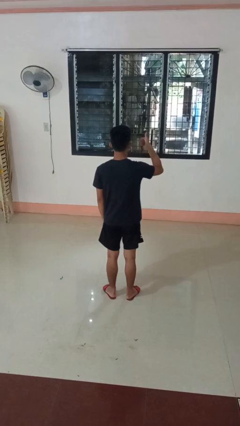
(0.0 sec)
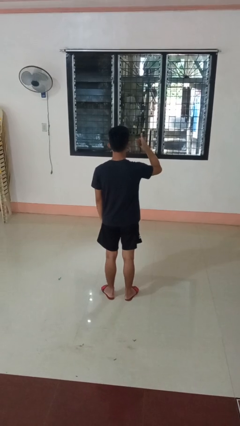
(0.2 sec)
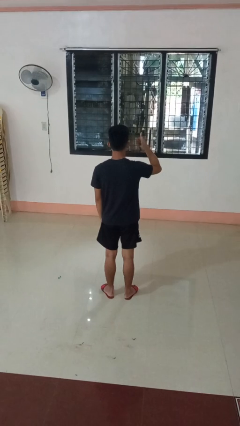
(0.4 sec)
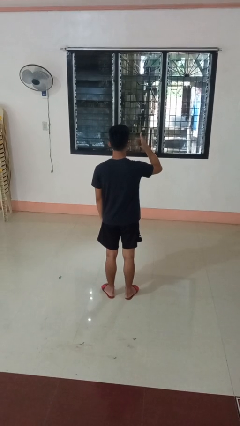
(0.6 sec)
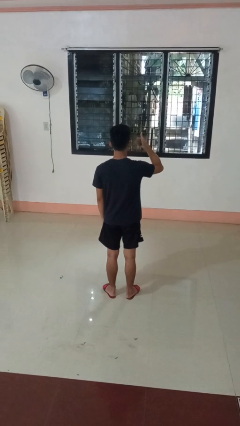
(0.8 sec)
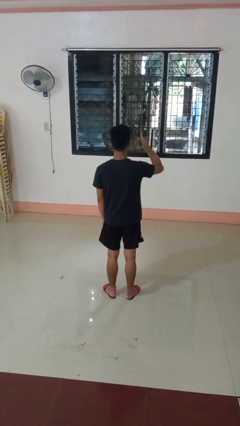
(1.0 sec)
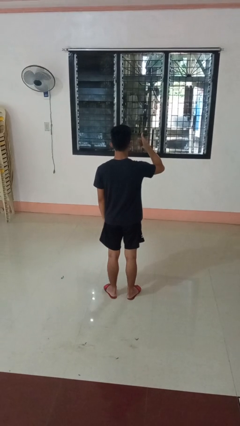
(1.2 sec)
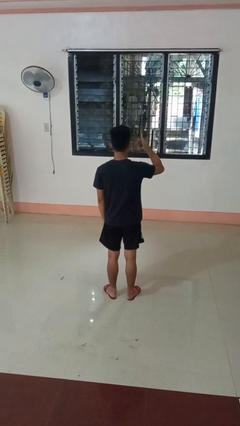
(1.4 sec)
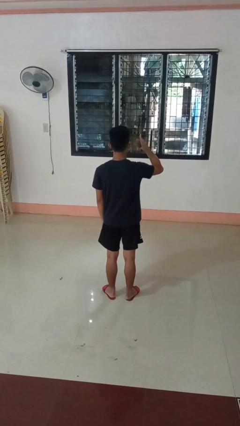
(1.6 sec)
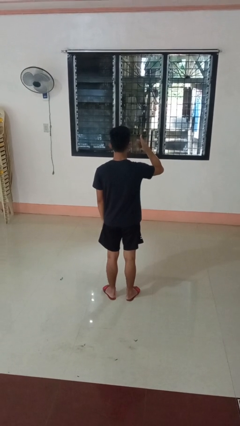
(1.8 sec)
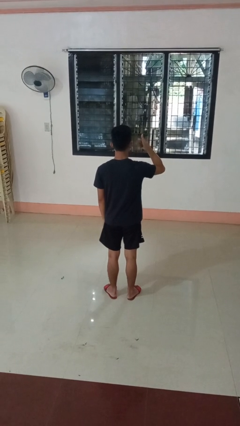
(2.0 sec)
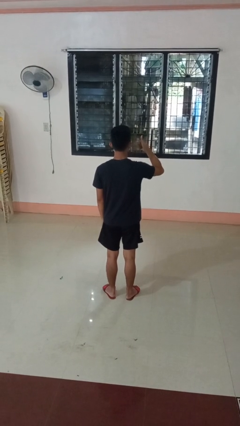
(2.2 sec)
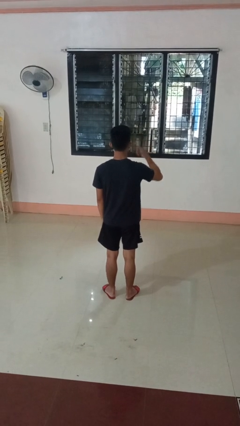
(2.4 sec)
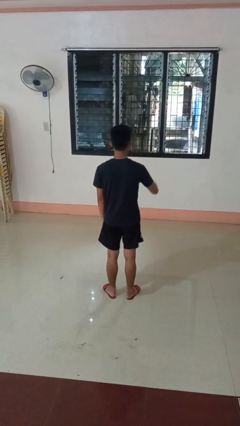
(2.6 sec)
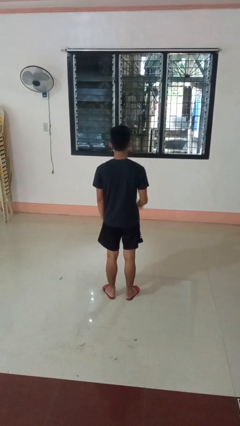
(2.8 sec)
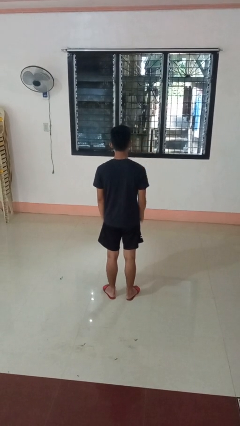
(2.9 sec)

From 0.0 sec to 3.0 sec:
person gestures thumbs up

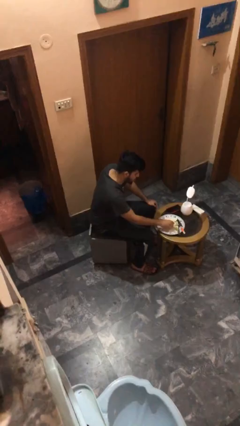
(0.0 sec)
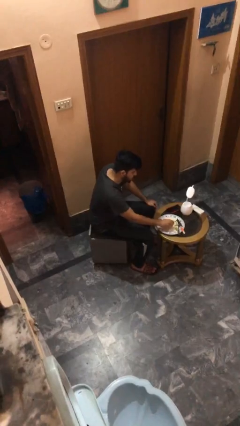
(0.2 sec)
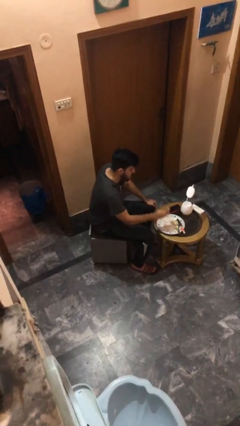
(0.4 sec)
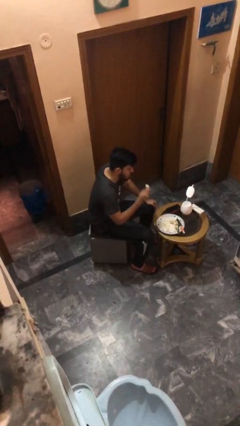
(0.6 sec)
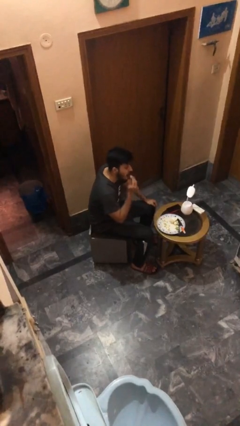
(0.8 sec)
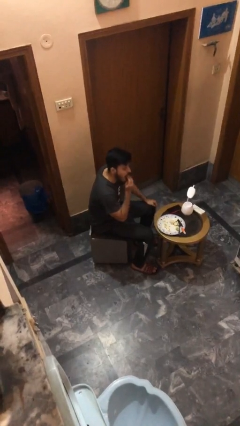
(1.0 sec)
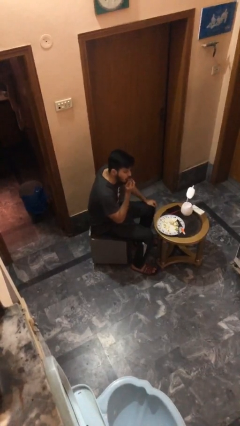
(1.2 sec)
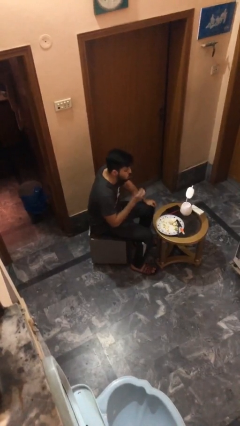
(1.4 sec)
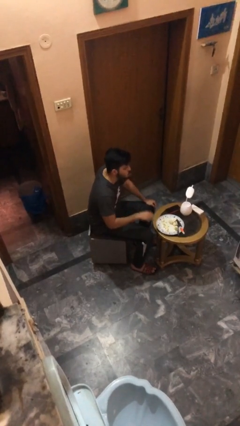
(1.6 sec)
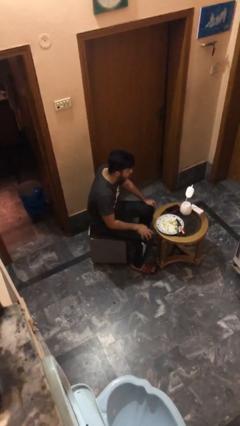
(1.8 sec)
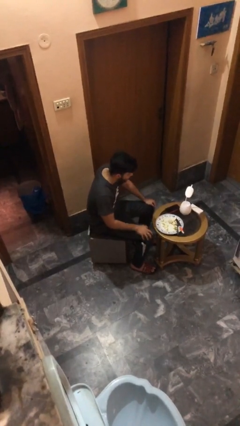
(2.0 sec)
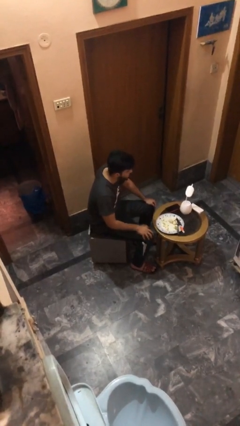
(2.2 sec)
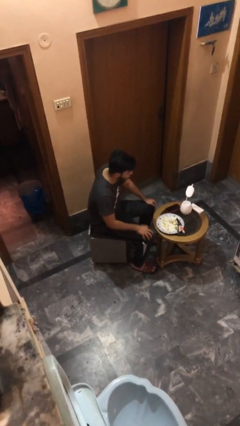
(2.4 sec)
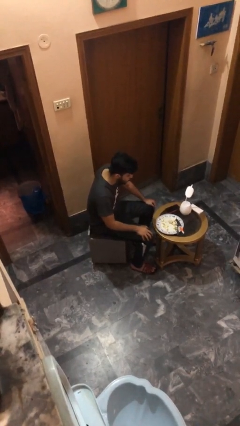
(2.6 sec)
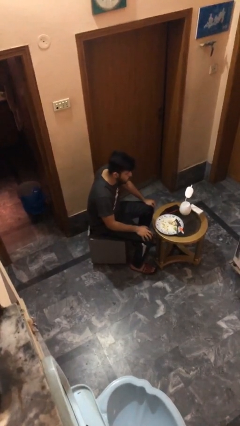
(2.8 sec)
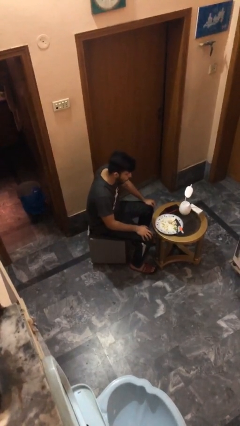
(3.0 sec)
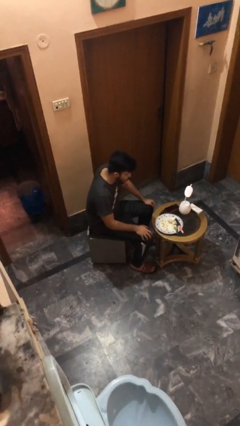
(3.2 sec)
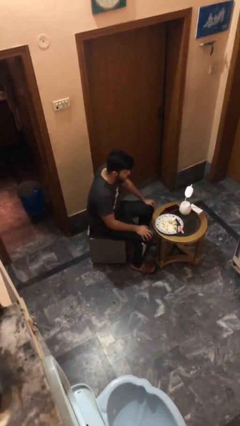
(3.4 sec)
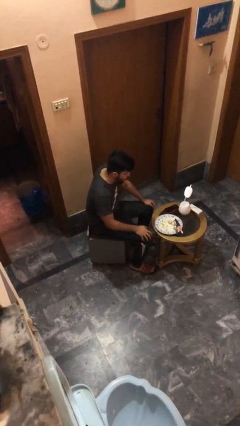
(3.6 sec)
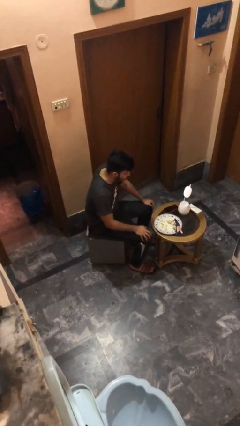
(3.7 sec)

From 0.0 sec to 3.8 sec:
person eats with hands

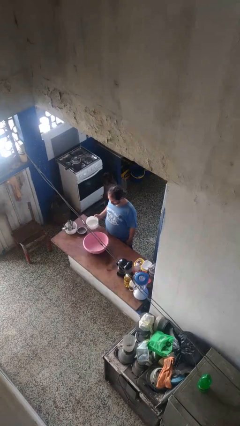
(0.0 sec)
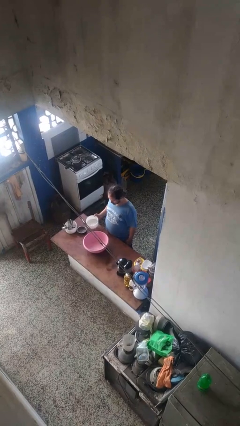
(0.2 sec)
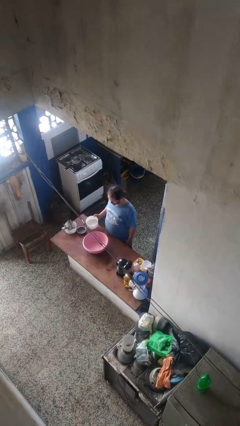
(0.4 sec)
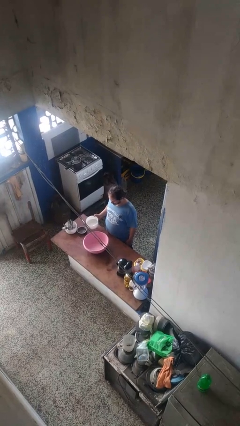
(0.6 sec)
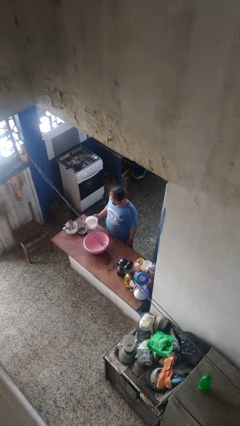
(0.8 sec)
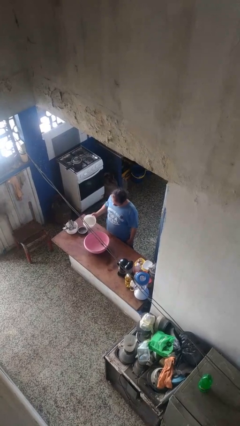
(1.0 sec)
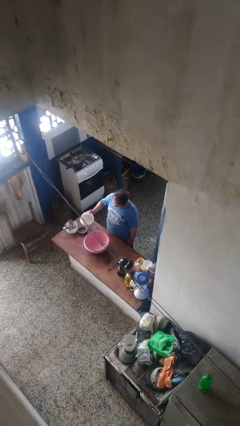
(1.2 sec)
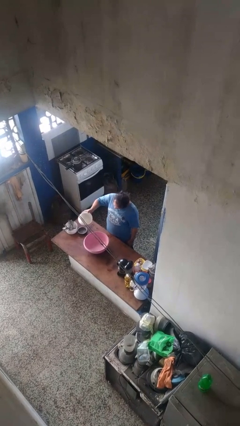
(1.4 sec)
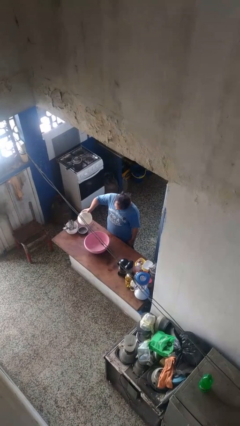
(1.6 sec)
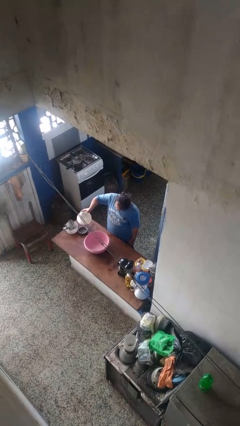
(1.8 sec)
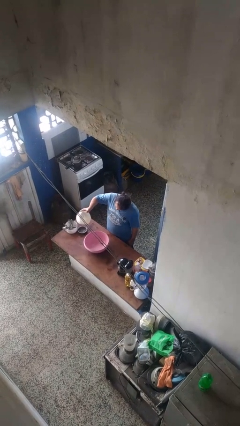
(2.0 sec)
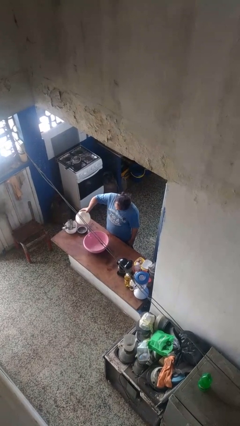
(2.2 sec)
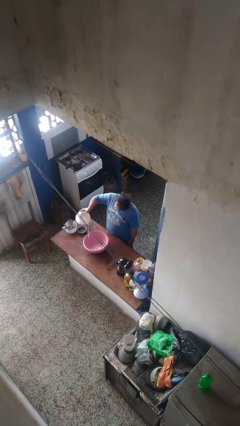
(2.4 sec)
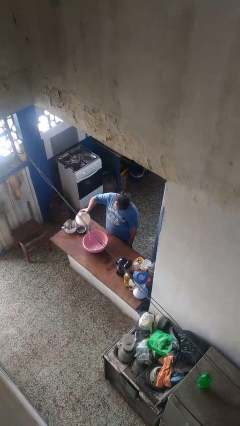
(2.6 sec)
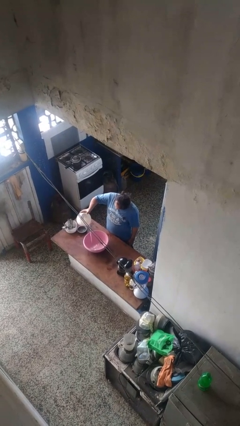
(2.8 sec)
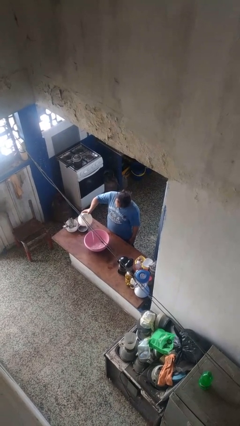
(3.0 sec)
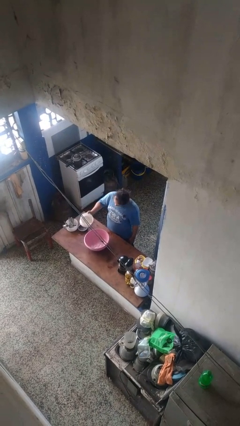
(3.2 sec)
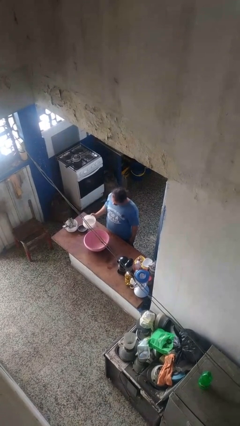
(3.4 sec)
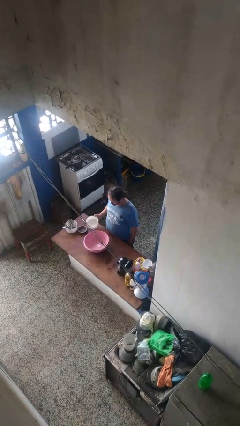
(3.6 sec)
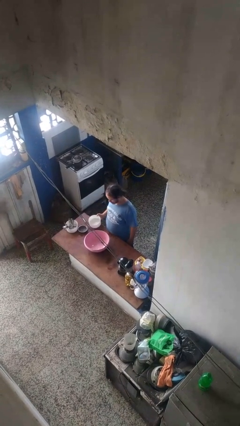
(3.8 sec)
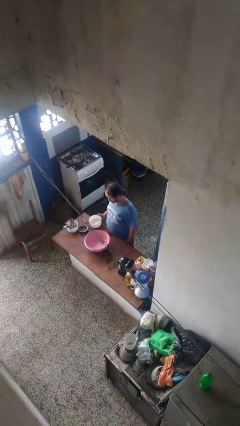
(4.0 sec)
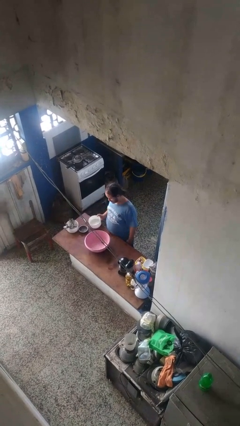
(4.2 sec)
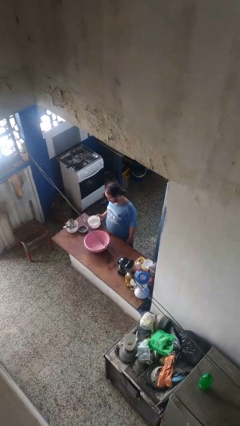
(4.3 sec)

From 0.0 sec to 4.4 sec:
person pours into bowl

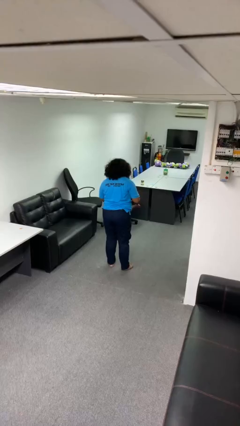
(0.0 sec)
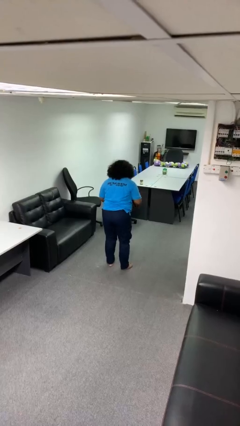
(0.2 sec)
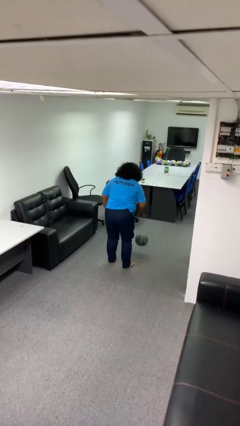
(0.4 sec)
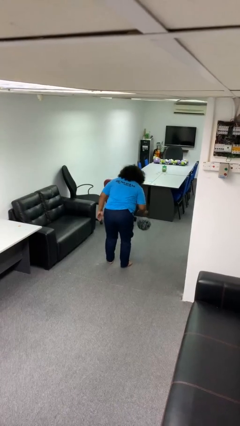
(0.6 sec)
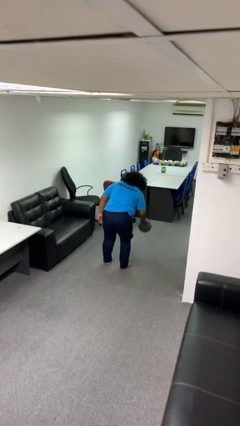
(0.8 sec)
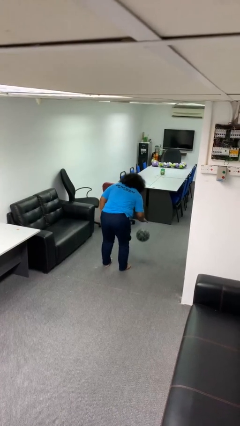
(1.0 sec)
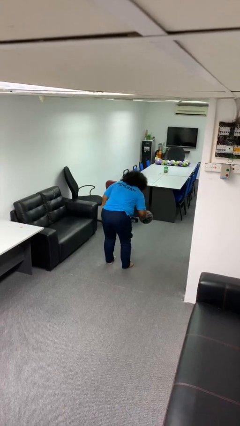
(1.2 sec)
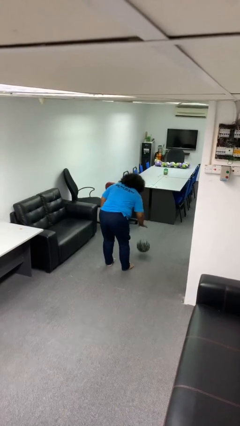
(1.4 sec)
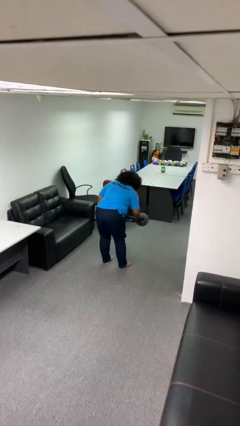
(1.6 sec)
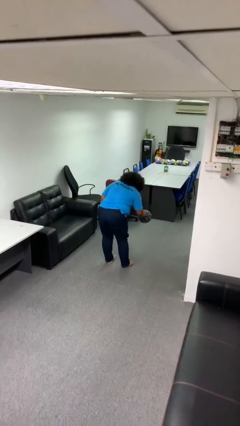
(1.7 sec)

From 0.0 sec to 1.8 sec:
person bounces ball on floor

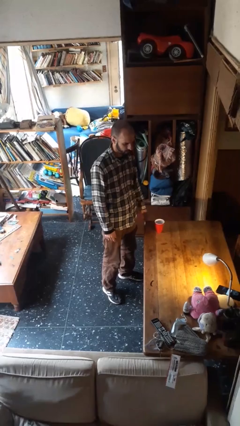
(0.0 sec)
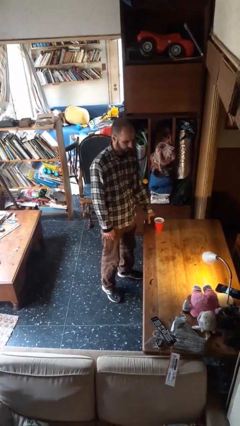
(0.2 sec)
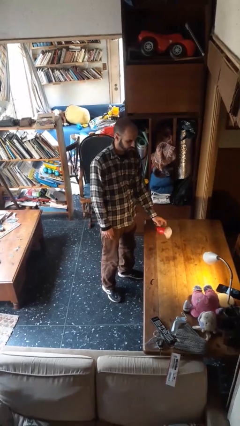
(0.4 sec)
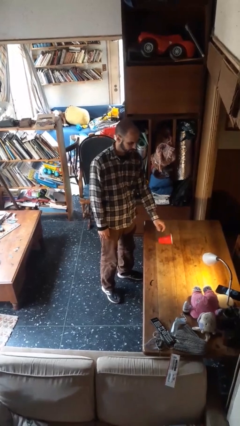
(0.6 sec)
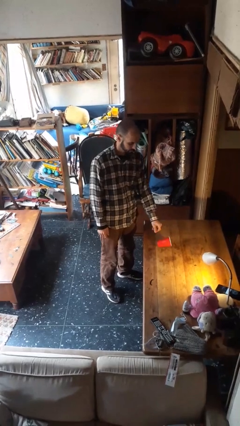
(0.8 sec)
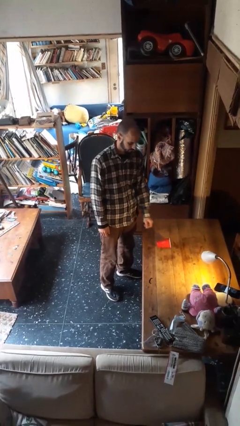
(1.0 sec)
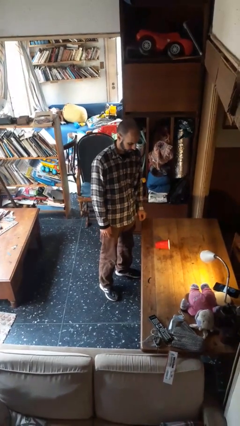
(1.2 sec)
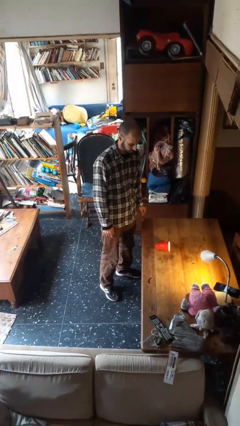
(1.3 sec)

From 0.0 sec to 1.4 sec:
person knocks over glass

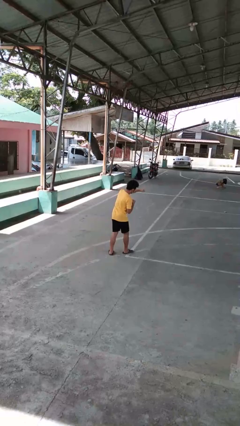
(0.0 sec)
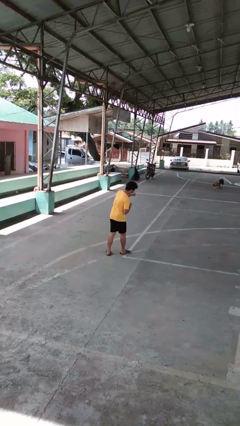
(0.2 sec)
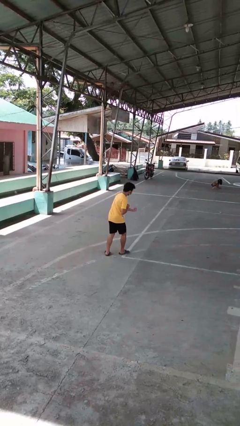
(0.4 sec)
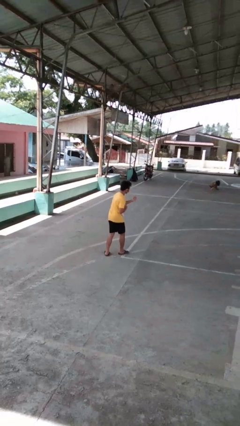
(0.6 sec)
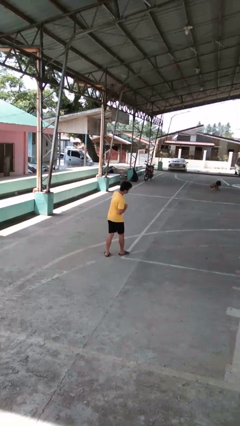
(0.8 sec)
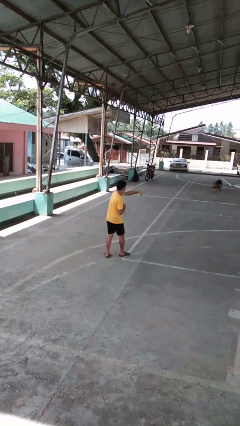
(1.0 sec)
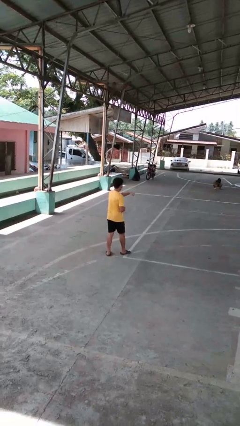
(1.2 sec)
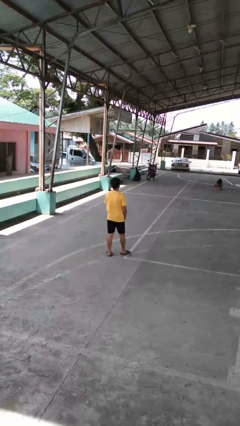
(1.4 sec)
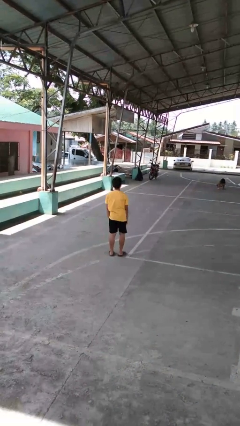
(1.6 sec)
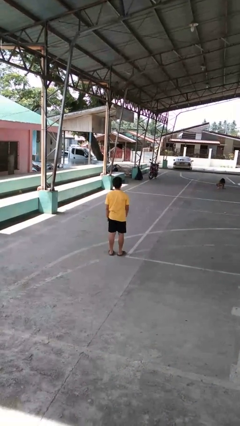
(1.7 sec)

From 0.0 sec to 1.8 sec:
person punches

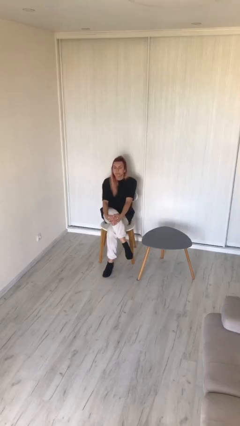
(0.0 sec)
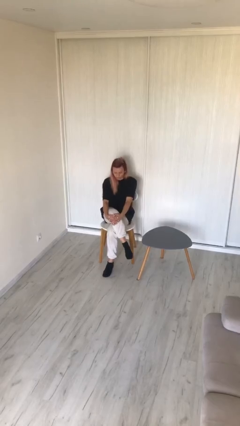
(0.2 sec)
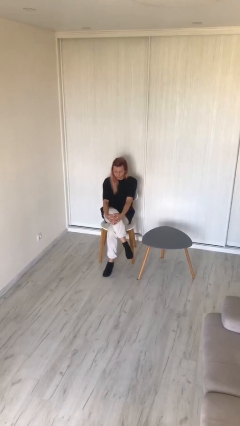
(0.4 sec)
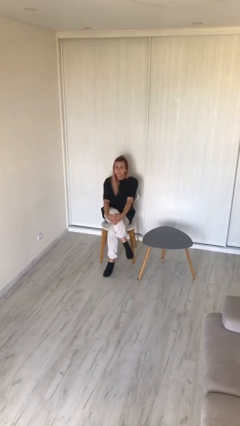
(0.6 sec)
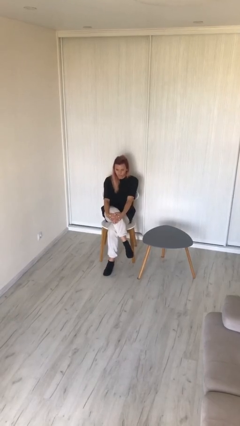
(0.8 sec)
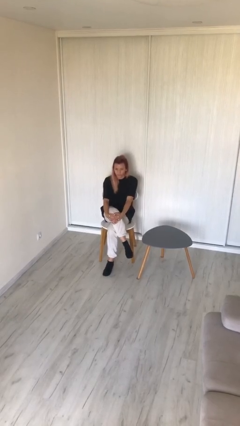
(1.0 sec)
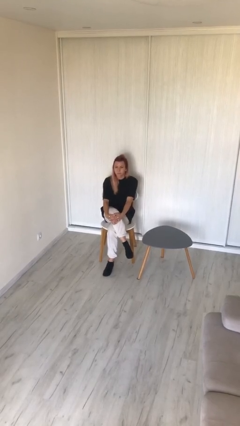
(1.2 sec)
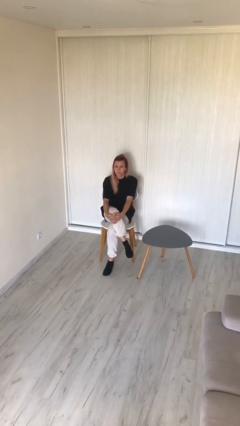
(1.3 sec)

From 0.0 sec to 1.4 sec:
person nods head
